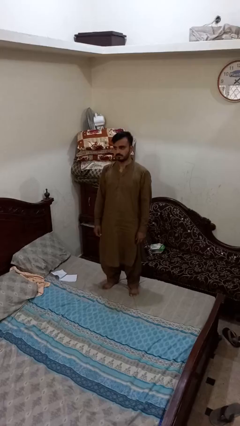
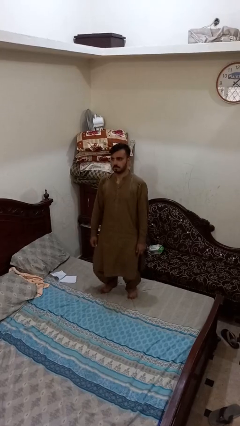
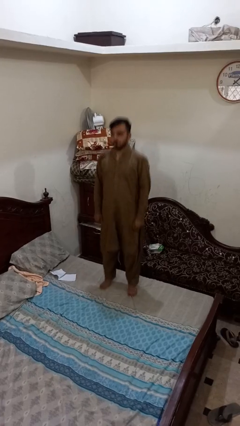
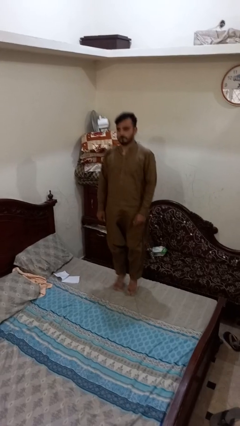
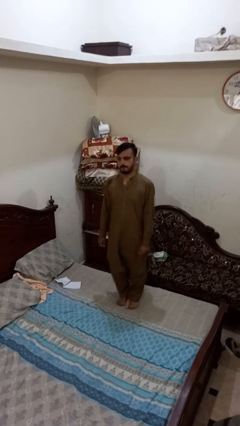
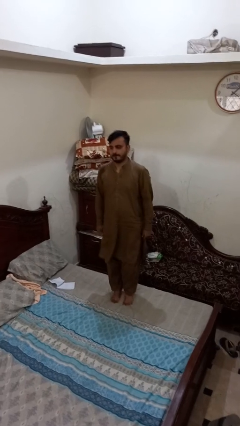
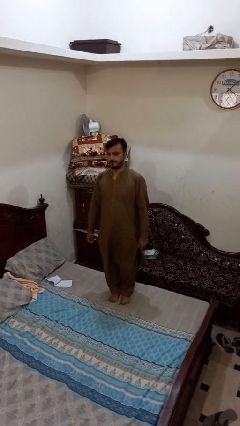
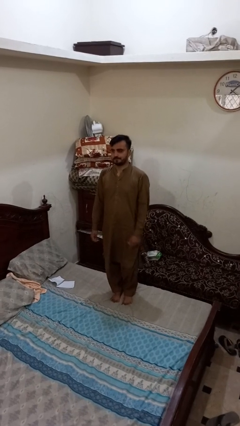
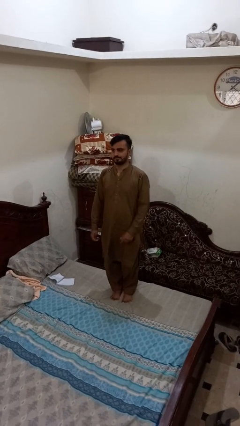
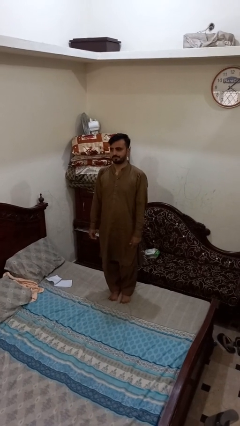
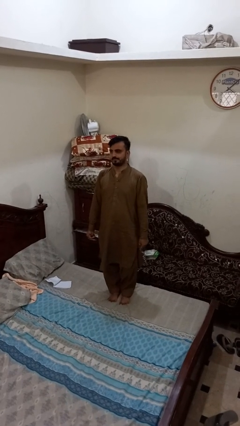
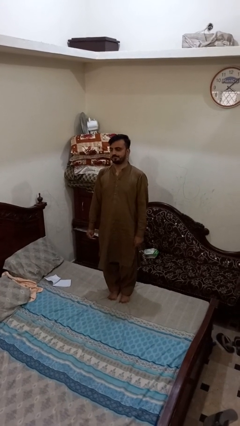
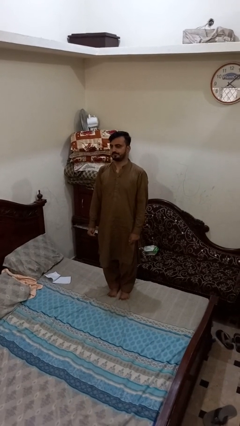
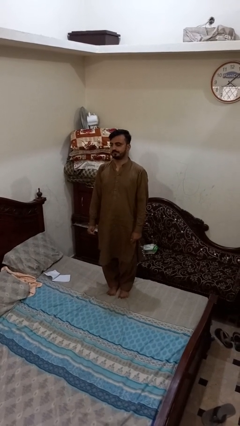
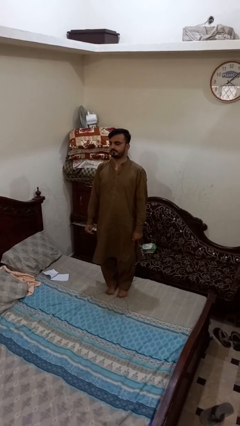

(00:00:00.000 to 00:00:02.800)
person jumps on bed

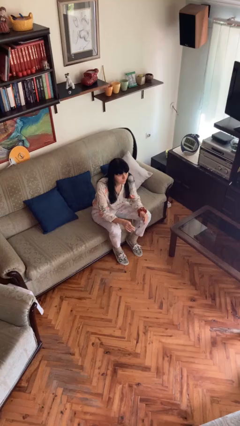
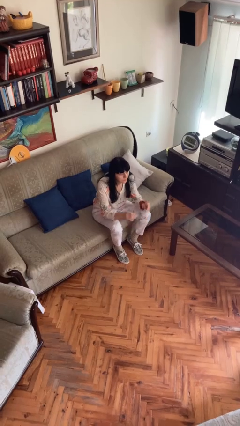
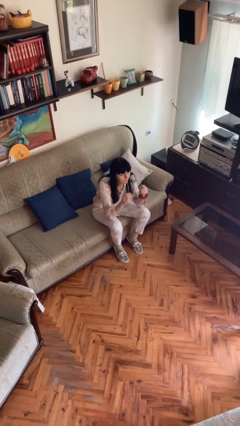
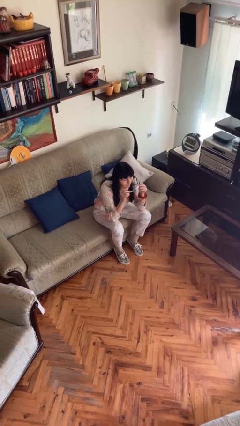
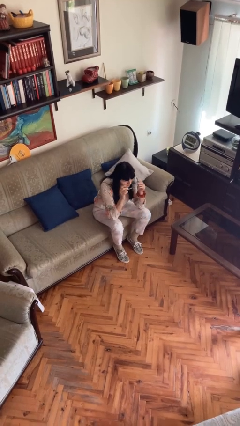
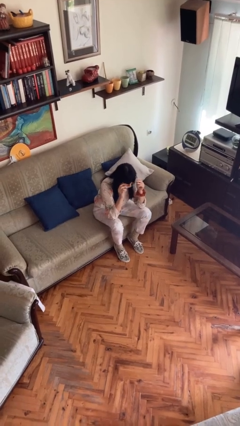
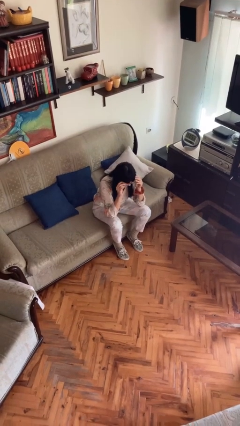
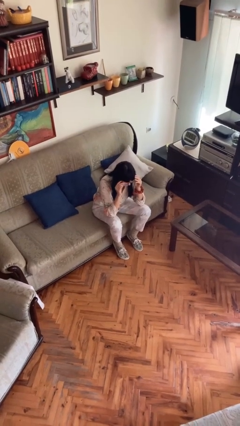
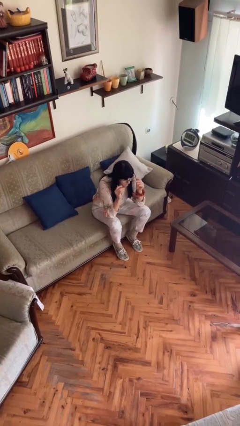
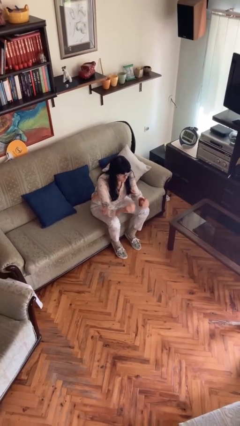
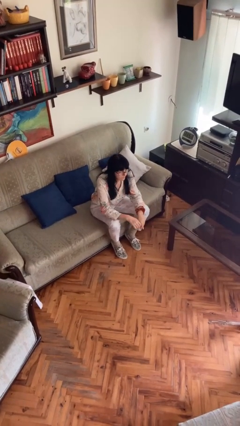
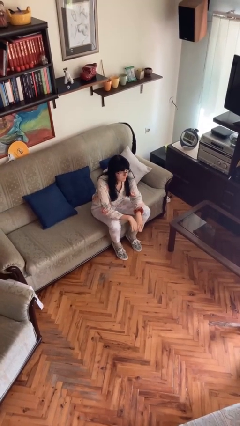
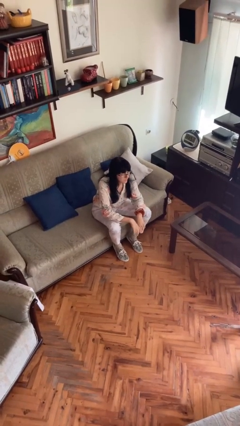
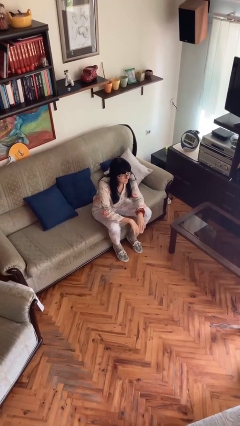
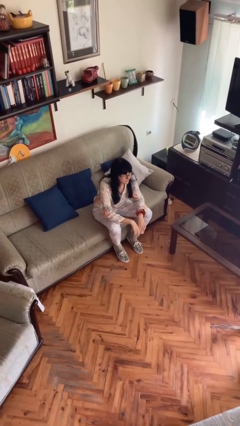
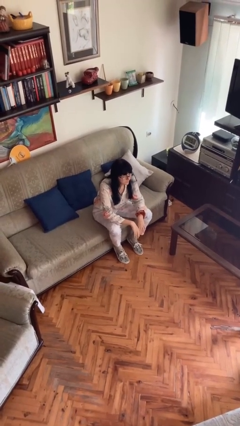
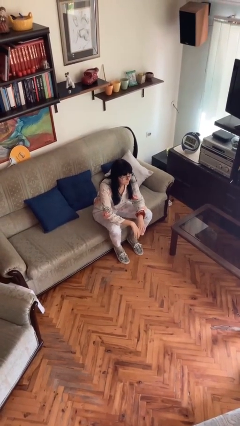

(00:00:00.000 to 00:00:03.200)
person puts on glasses

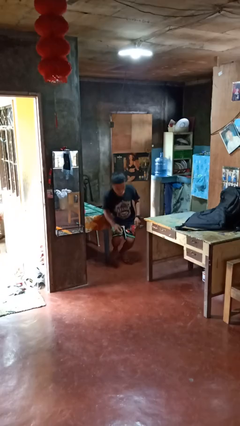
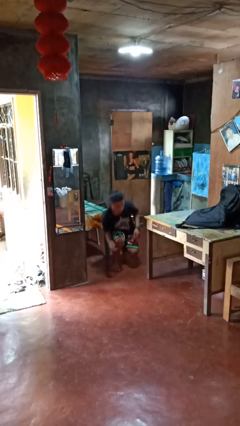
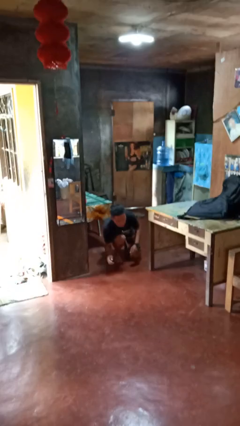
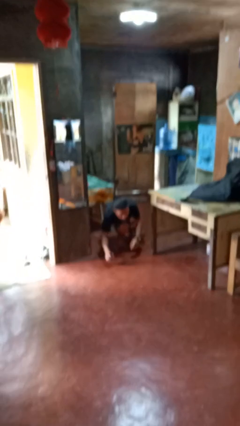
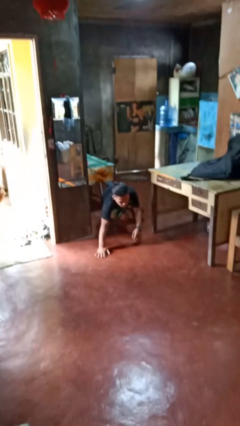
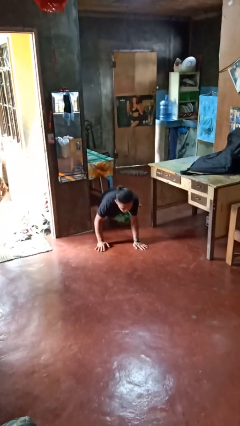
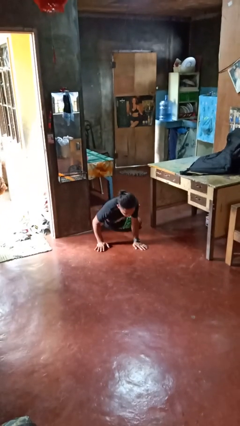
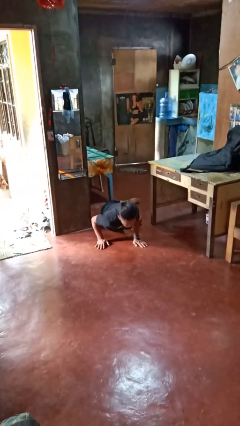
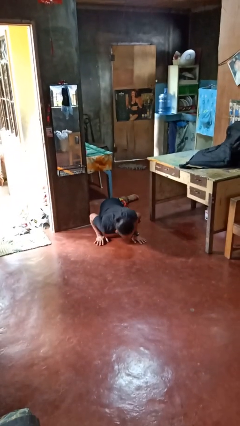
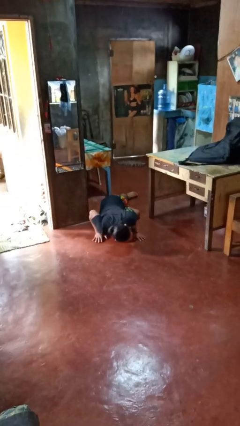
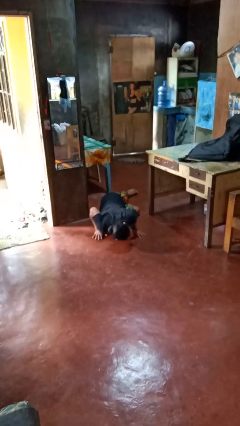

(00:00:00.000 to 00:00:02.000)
person trips on object on floor

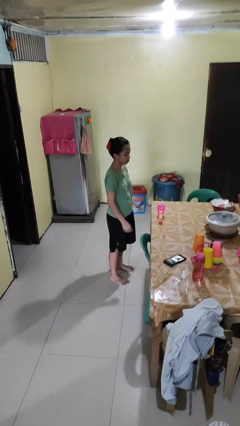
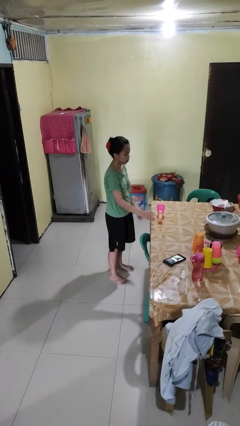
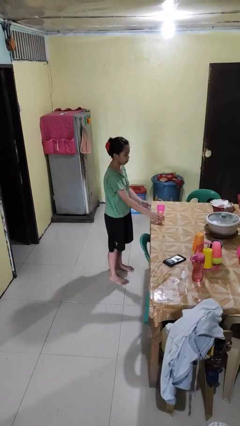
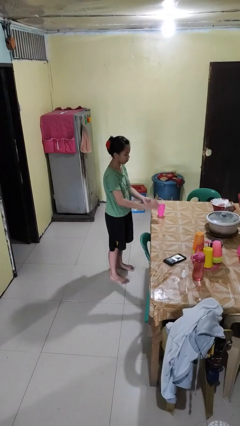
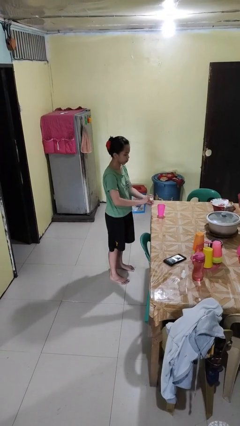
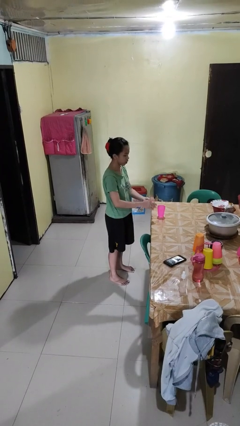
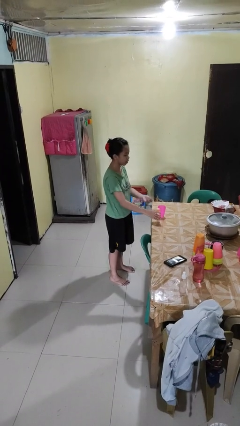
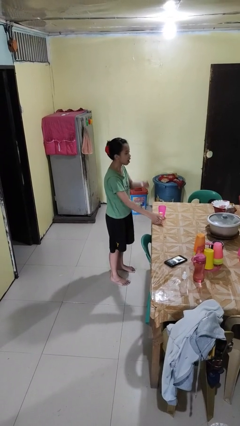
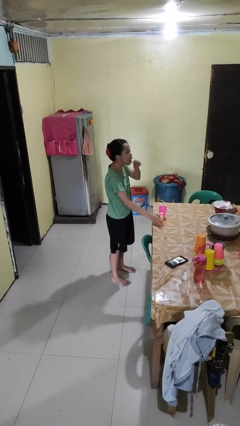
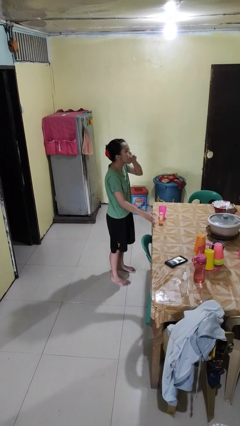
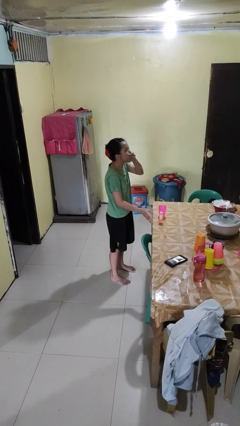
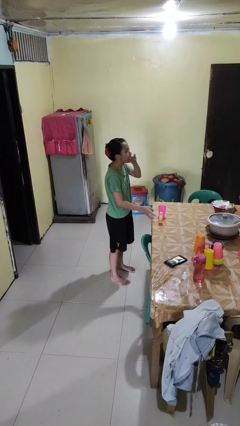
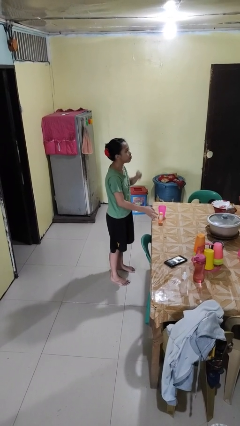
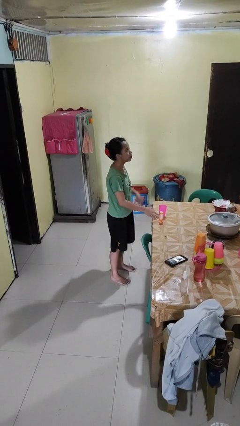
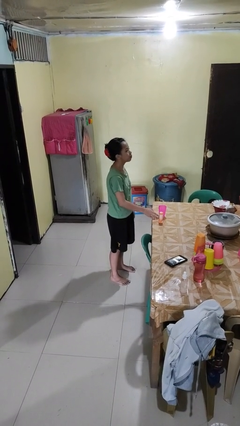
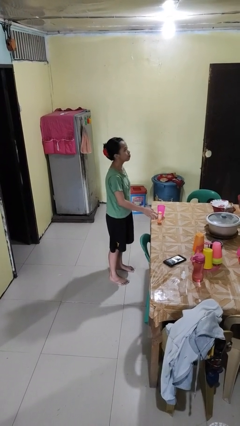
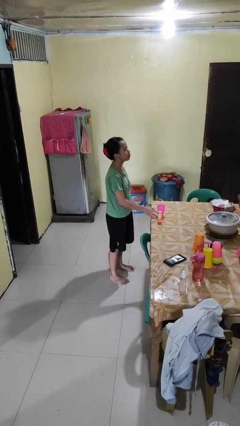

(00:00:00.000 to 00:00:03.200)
person takes medicine pills

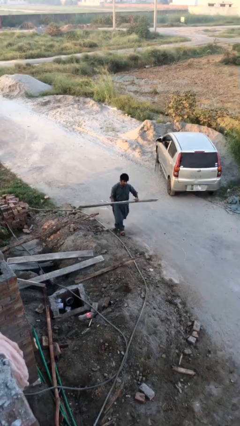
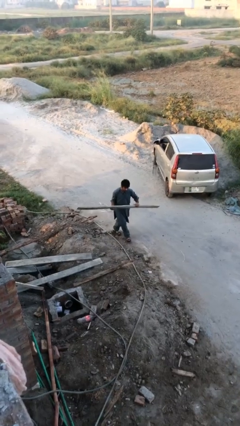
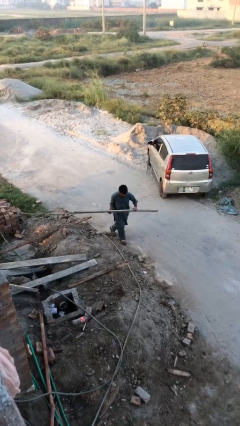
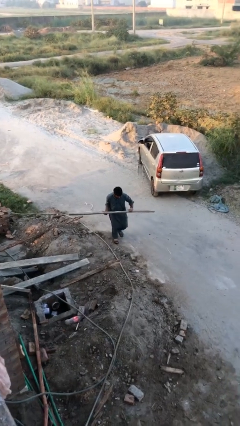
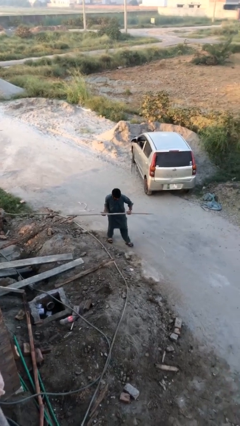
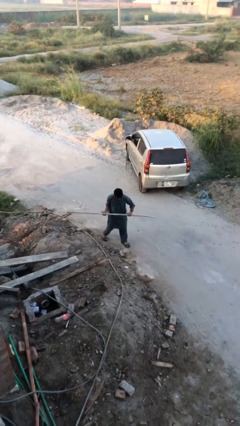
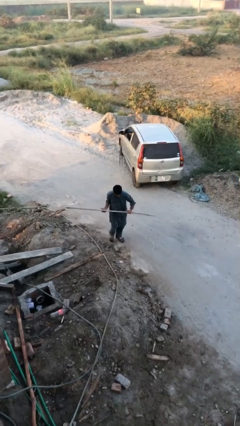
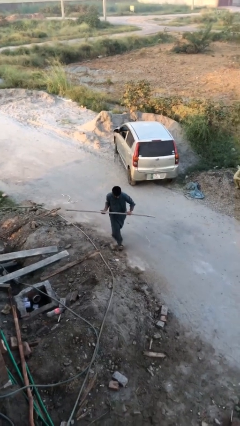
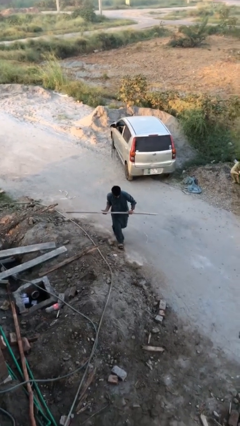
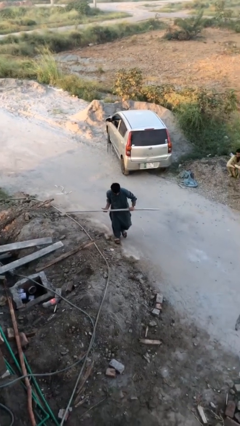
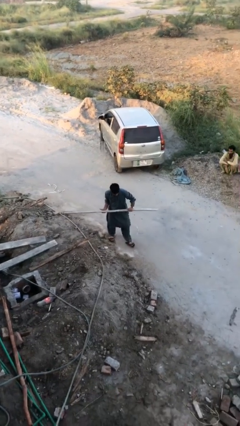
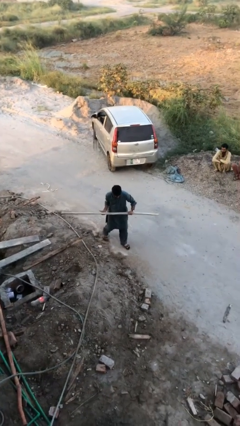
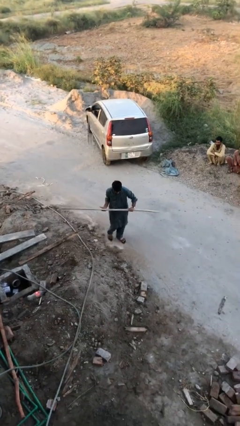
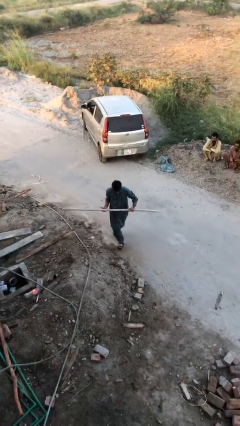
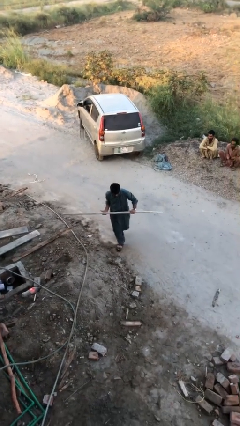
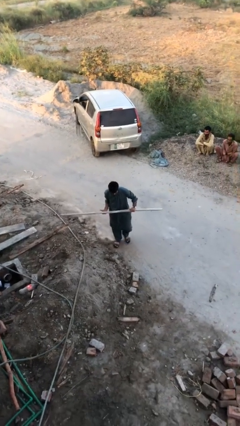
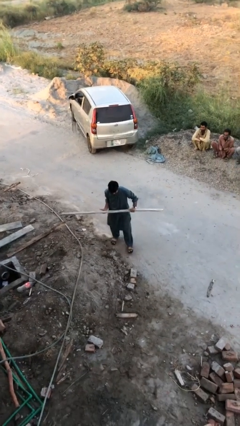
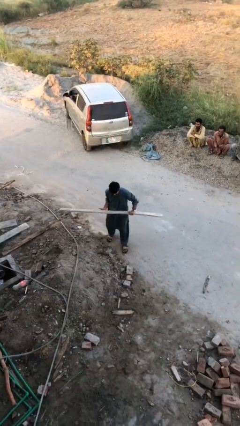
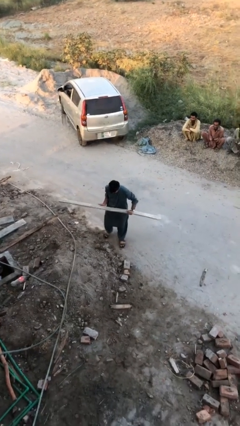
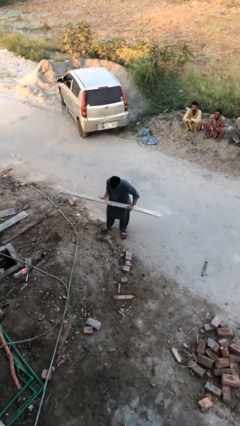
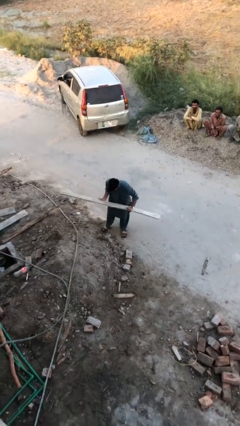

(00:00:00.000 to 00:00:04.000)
person carries heavy object

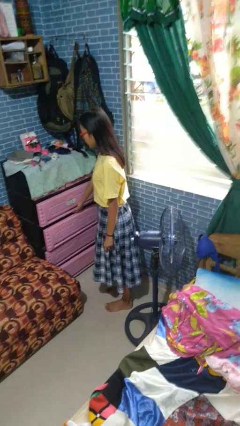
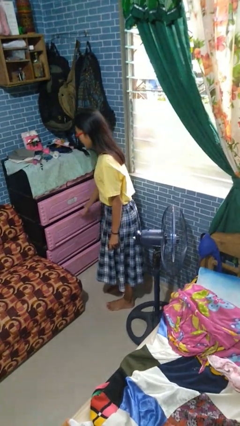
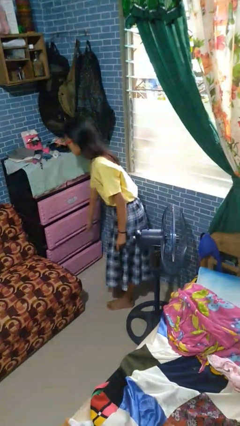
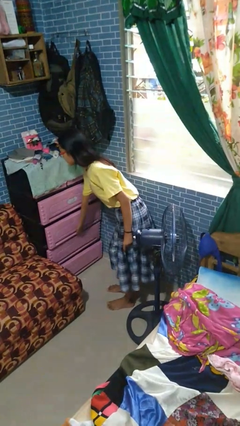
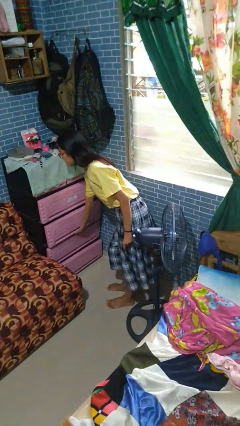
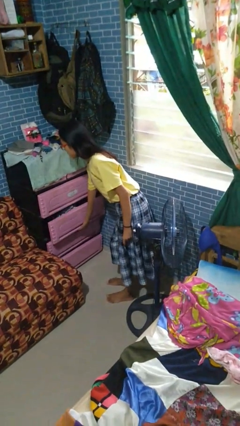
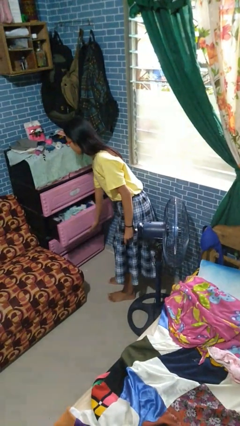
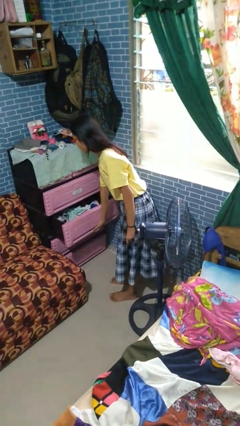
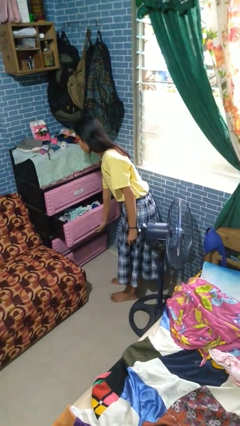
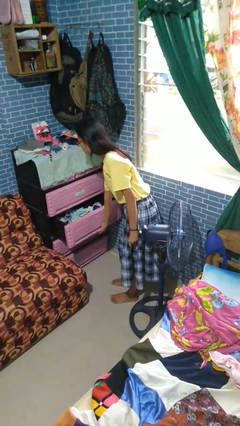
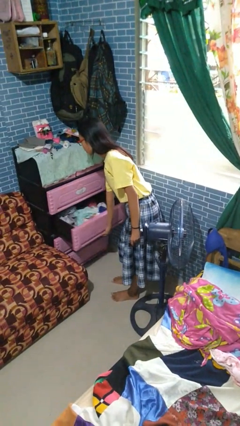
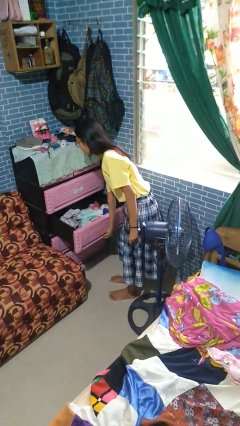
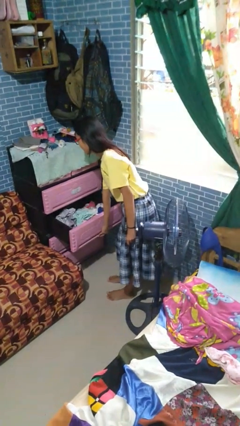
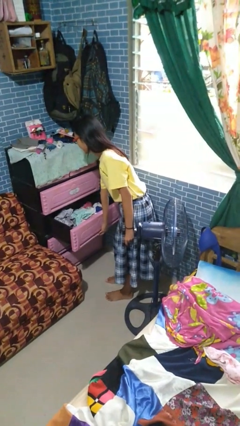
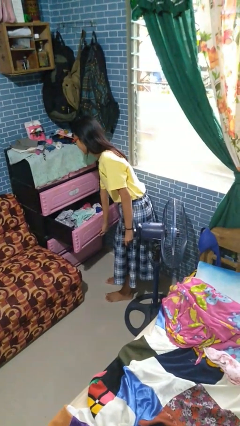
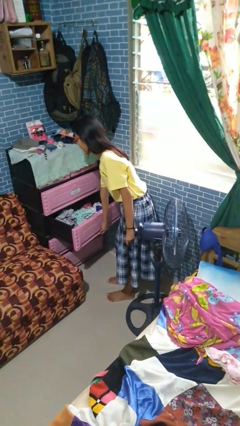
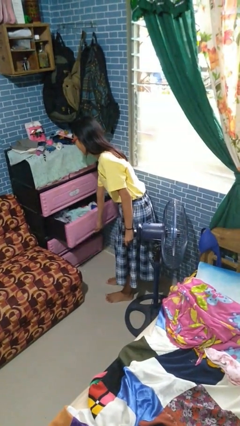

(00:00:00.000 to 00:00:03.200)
person opens dresser drawer
